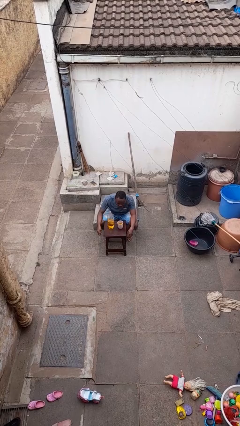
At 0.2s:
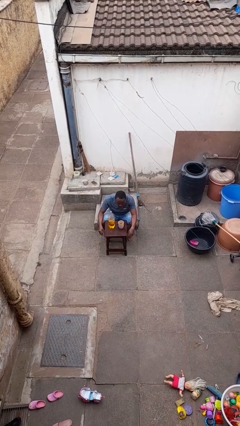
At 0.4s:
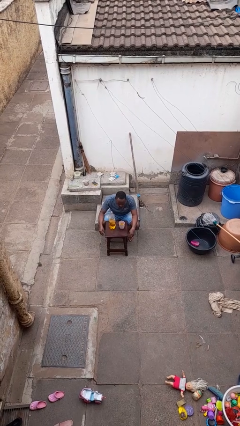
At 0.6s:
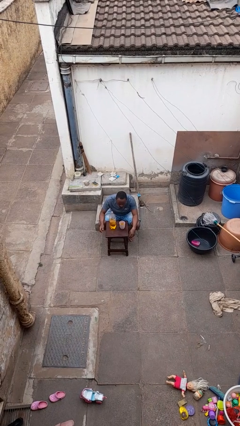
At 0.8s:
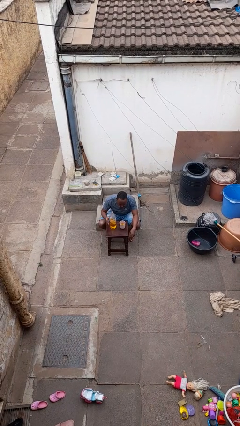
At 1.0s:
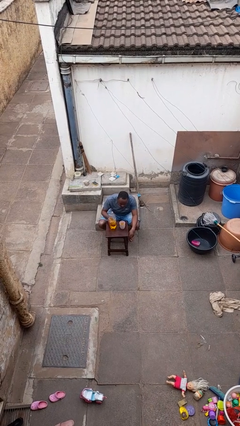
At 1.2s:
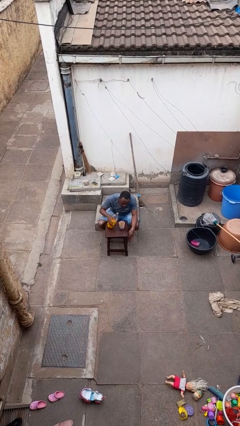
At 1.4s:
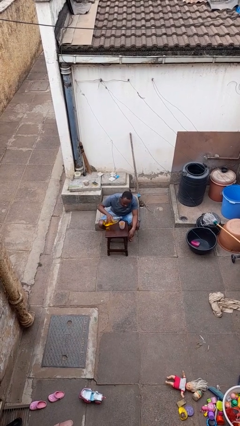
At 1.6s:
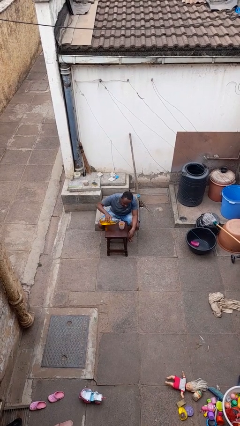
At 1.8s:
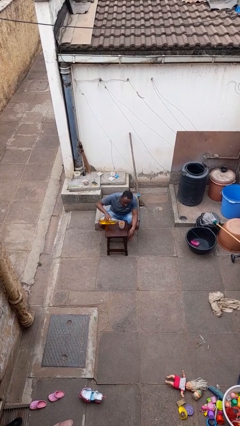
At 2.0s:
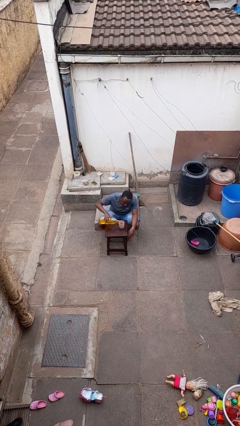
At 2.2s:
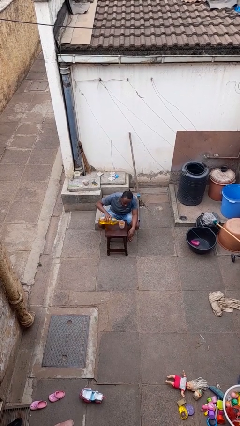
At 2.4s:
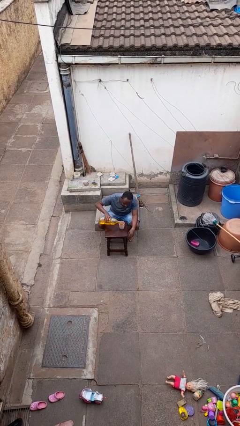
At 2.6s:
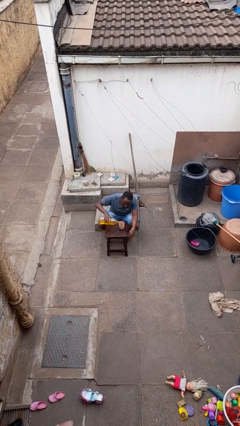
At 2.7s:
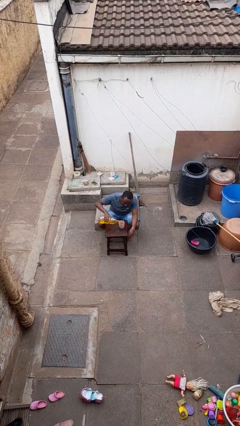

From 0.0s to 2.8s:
person pours liquid into cup

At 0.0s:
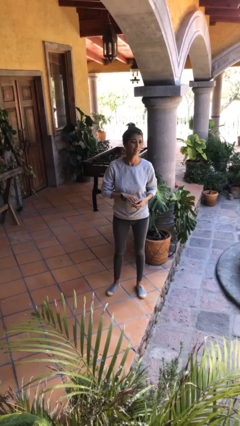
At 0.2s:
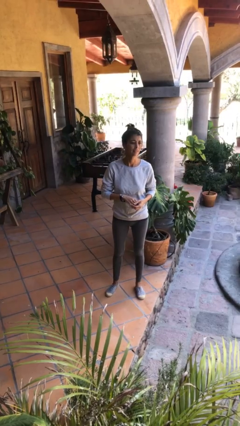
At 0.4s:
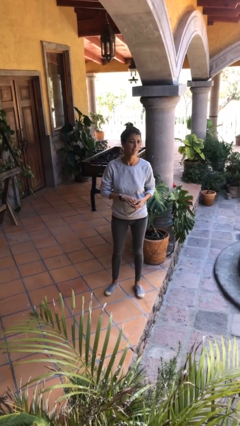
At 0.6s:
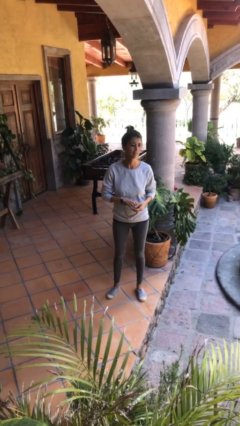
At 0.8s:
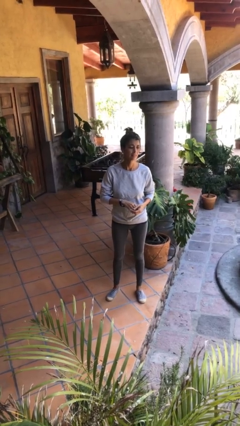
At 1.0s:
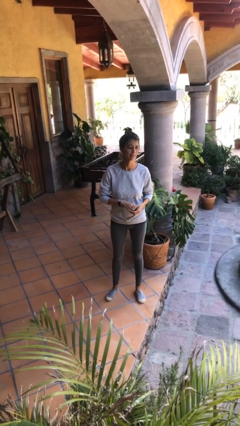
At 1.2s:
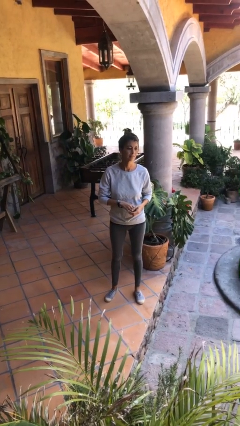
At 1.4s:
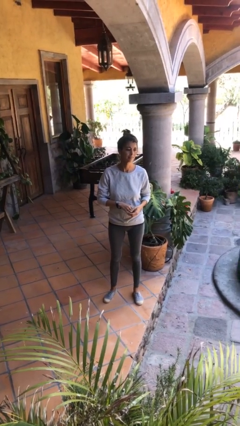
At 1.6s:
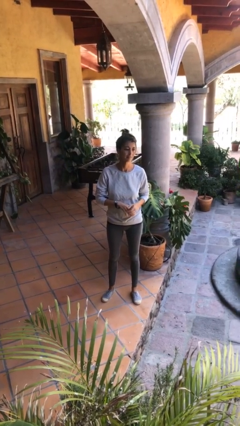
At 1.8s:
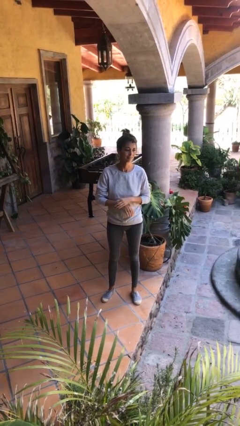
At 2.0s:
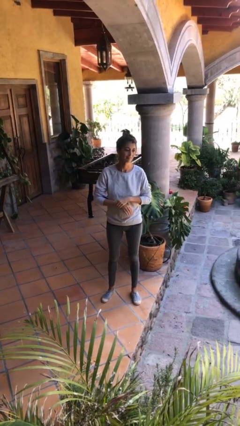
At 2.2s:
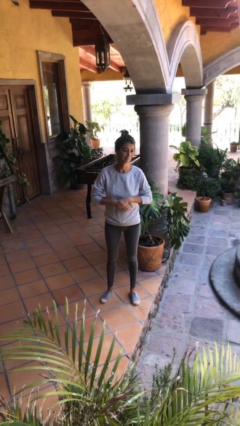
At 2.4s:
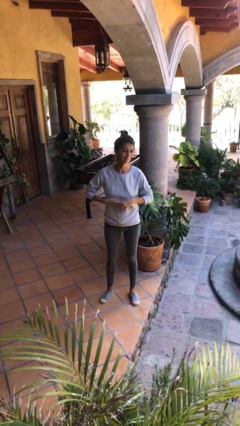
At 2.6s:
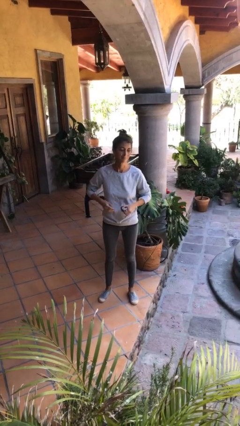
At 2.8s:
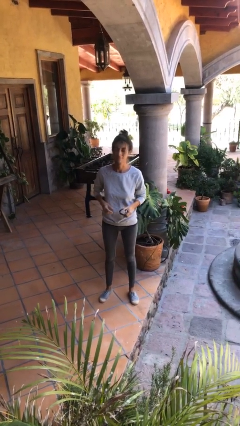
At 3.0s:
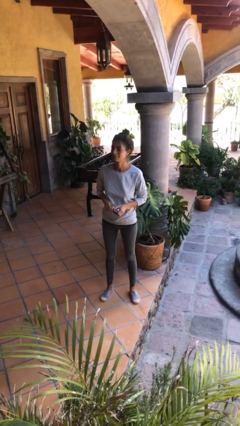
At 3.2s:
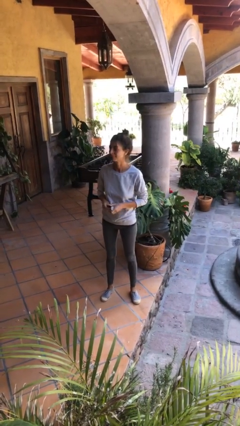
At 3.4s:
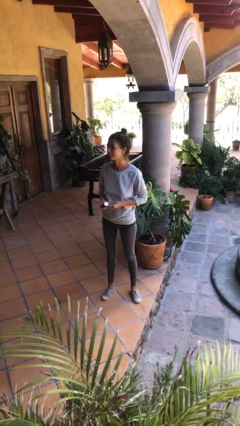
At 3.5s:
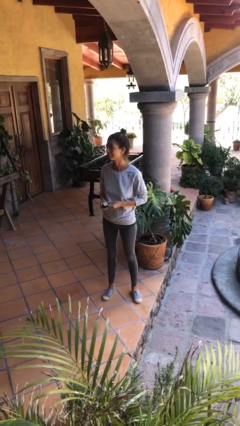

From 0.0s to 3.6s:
person takes off wristwatch

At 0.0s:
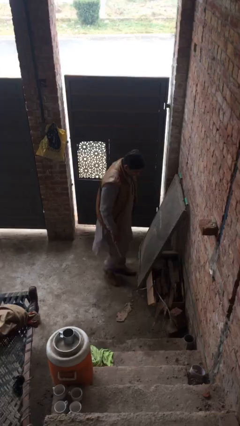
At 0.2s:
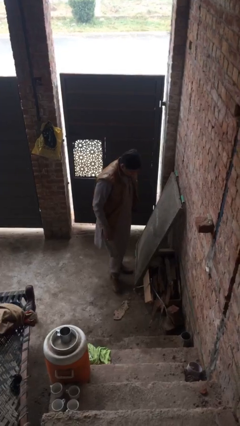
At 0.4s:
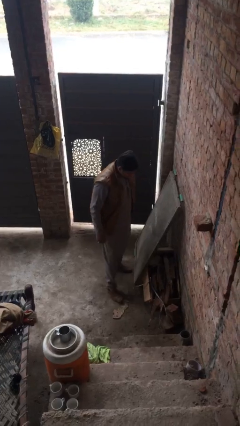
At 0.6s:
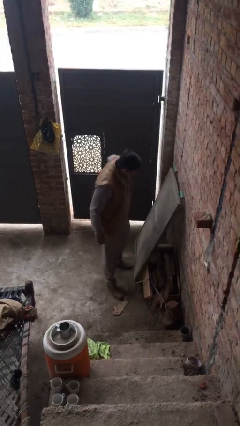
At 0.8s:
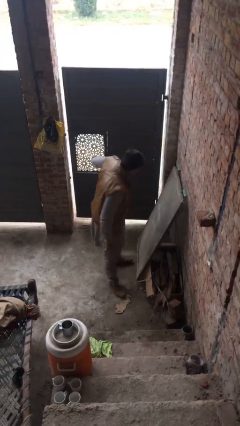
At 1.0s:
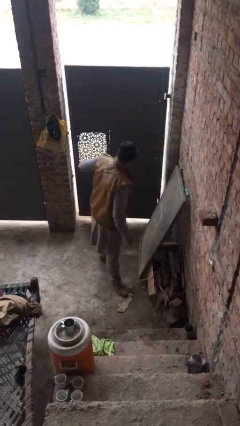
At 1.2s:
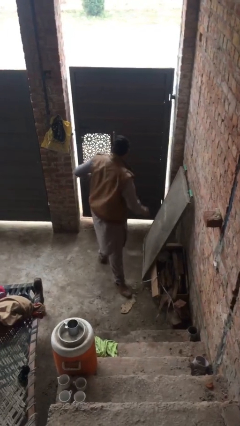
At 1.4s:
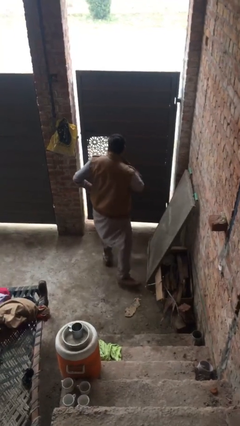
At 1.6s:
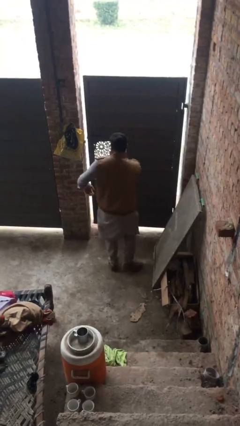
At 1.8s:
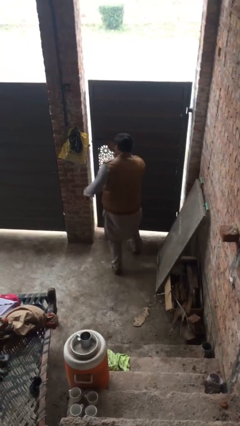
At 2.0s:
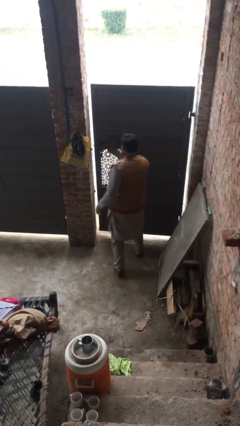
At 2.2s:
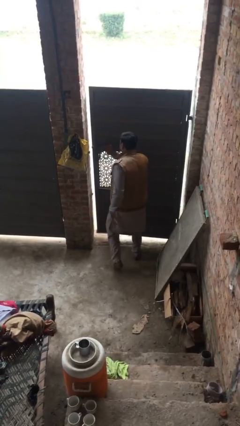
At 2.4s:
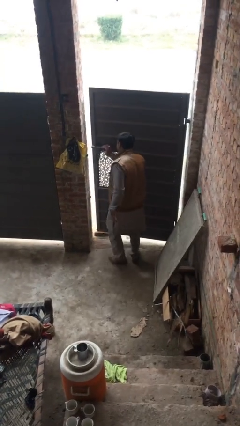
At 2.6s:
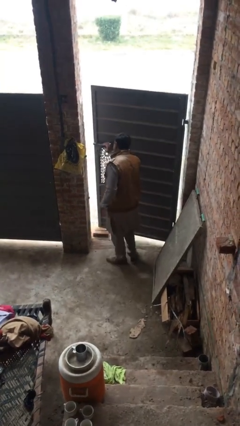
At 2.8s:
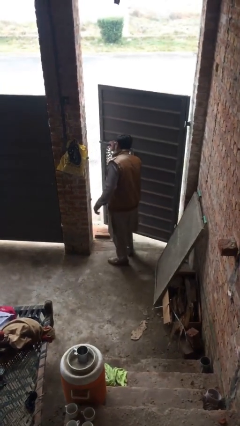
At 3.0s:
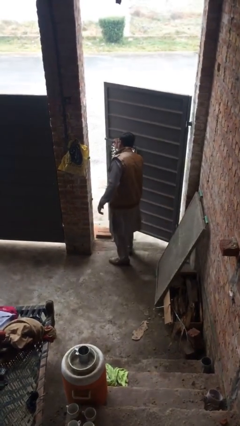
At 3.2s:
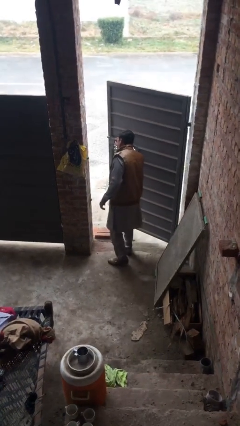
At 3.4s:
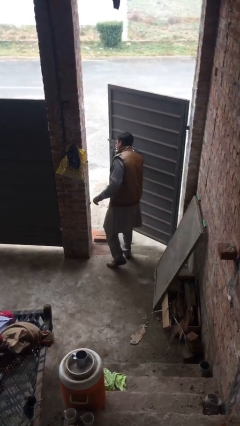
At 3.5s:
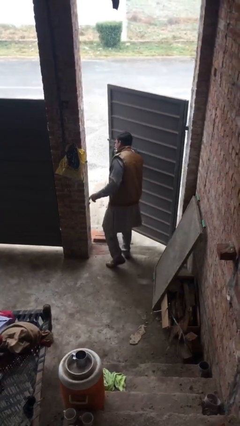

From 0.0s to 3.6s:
person opens facility door

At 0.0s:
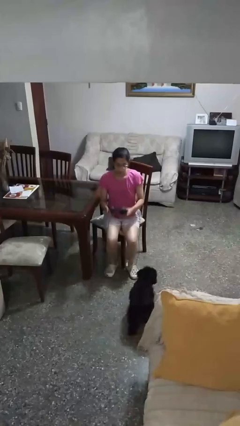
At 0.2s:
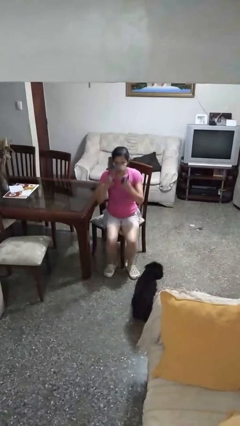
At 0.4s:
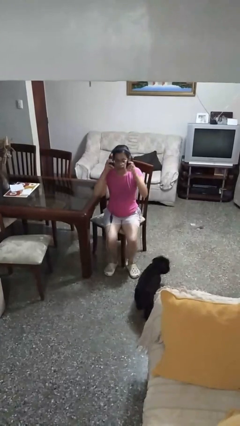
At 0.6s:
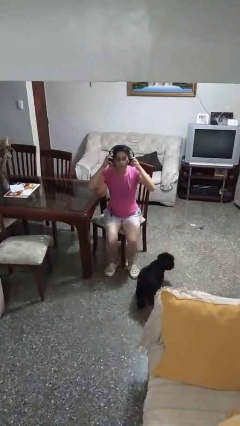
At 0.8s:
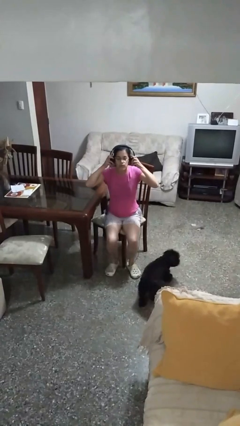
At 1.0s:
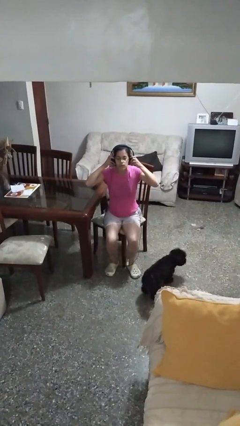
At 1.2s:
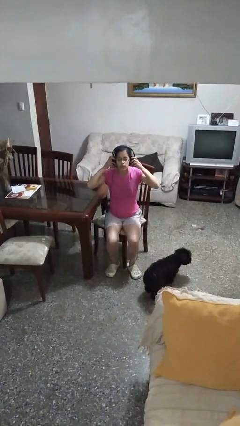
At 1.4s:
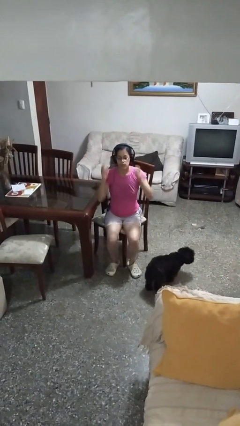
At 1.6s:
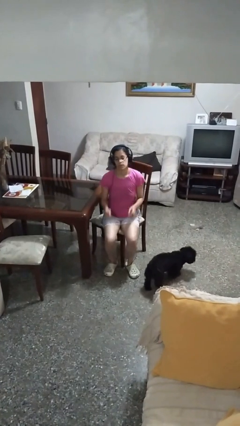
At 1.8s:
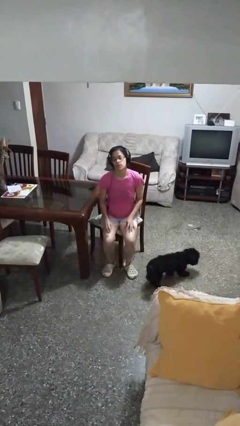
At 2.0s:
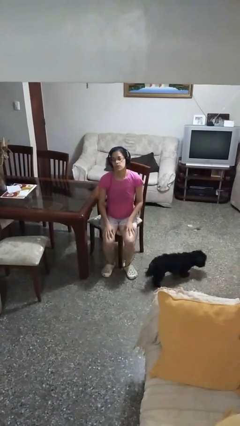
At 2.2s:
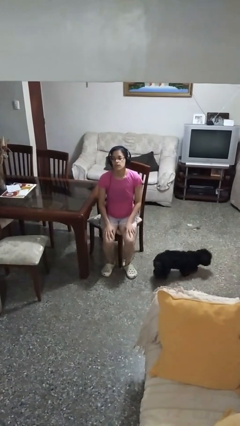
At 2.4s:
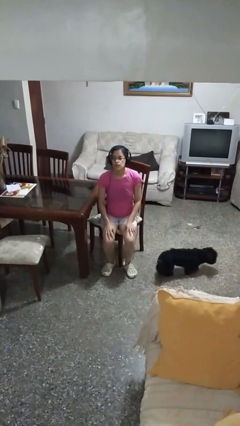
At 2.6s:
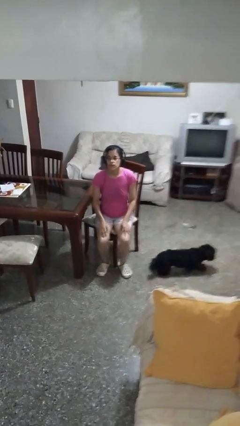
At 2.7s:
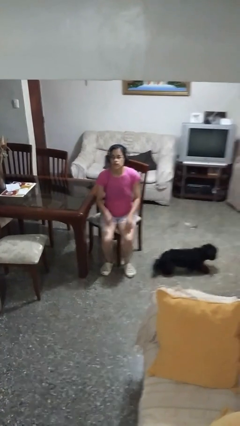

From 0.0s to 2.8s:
person puts on headphones

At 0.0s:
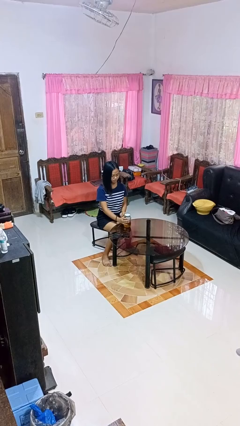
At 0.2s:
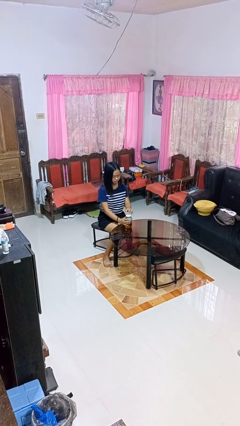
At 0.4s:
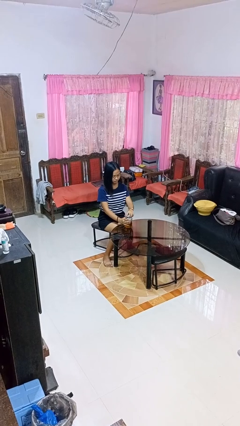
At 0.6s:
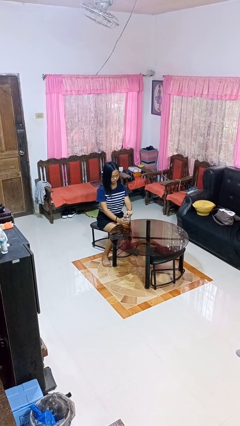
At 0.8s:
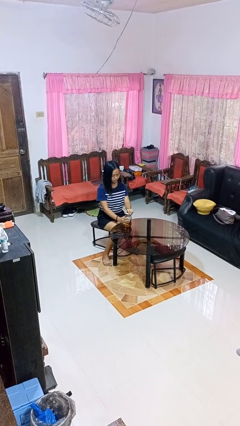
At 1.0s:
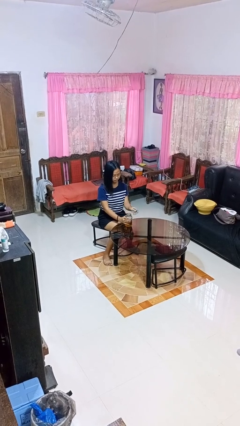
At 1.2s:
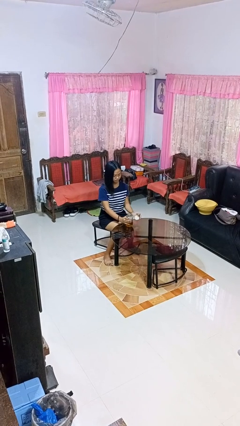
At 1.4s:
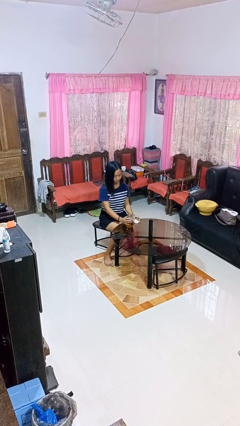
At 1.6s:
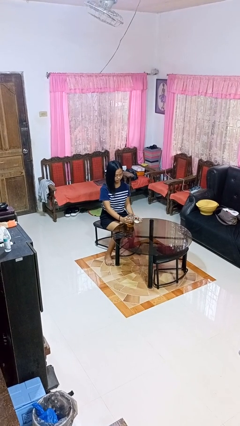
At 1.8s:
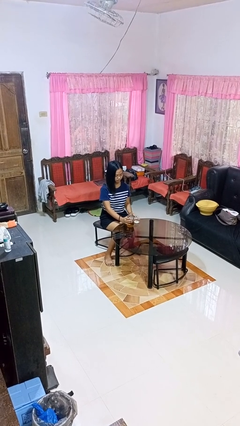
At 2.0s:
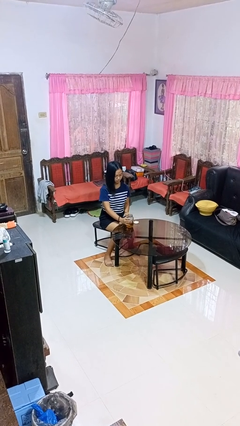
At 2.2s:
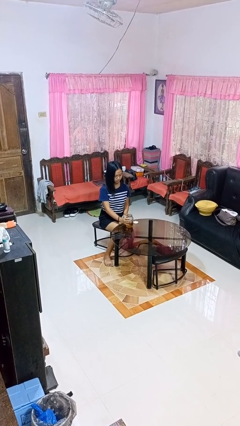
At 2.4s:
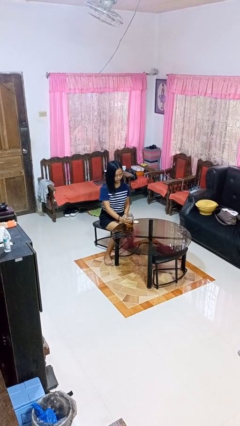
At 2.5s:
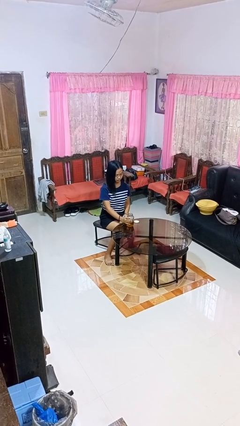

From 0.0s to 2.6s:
person opens jar

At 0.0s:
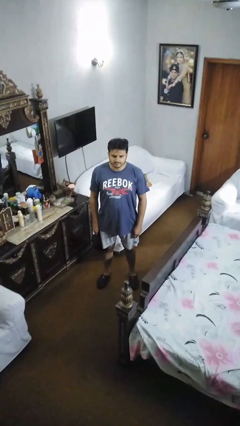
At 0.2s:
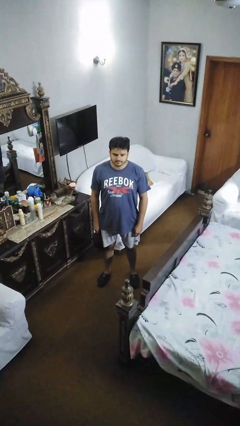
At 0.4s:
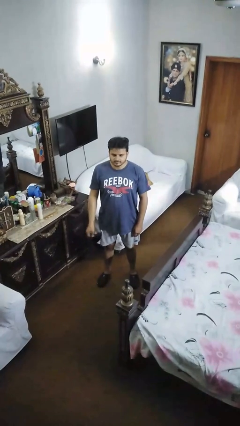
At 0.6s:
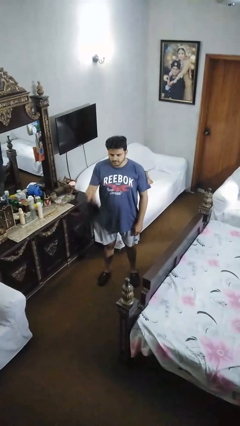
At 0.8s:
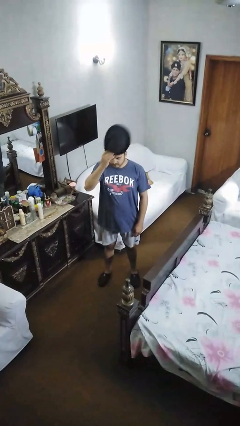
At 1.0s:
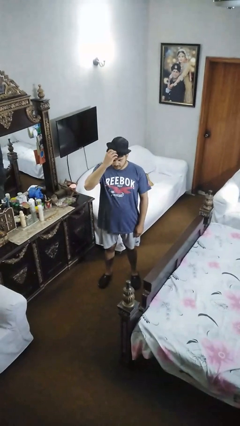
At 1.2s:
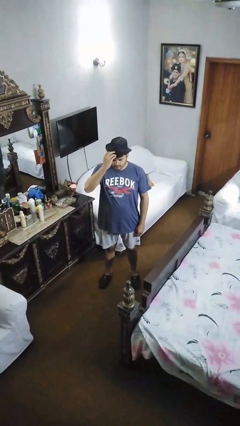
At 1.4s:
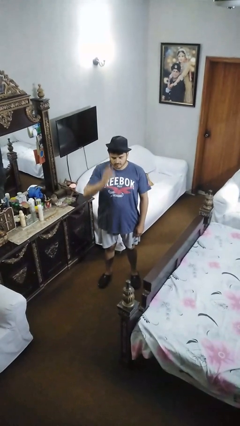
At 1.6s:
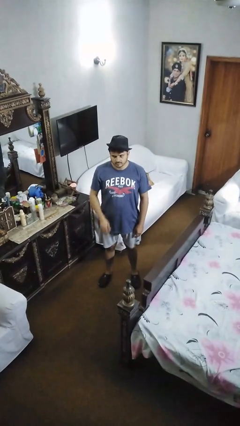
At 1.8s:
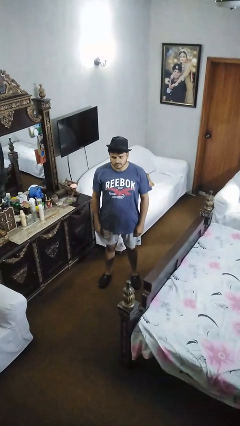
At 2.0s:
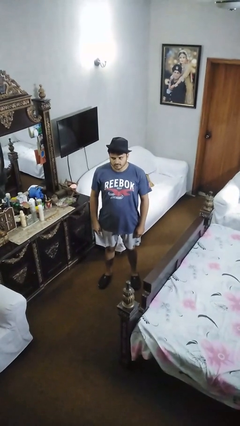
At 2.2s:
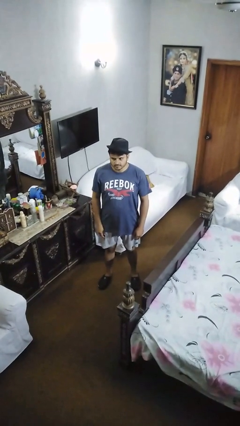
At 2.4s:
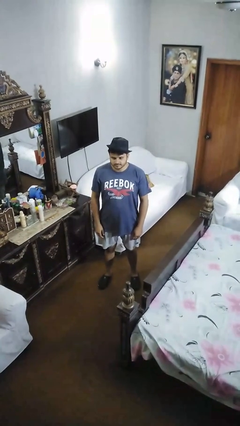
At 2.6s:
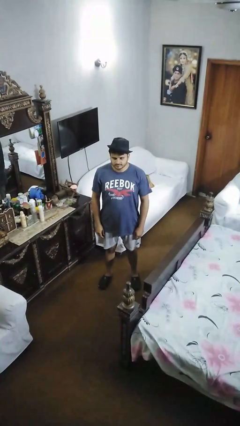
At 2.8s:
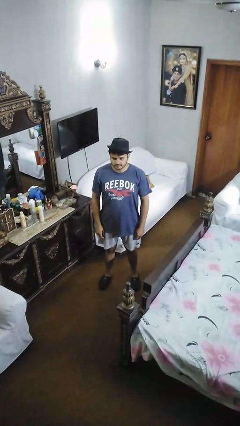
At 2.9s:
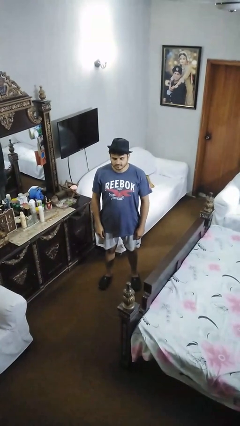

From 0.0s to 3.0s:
person puts on hat
